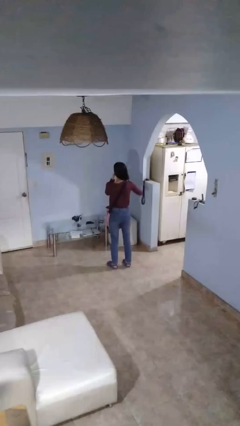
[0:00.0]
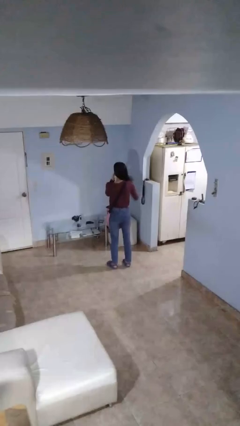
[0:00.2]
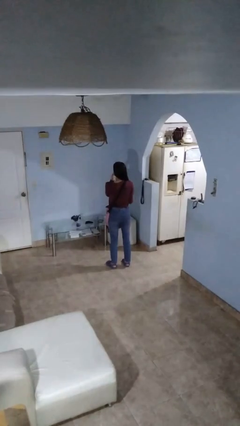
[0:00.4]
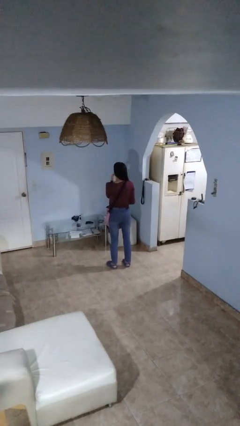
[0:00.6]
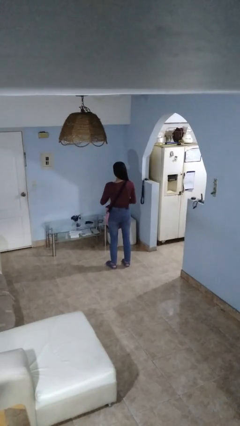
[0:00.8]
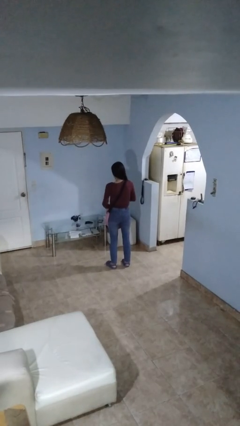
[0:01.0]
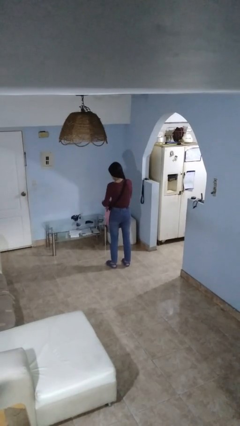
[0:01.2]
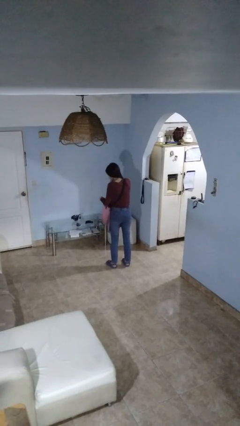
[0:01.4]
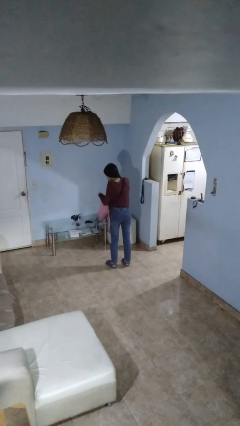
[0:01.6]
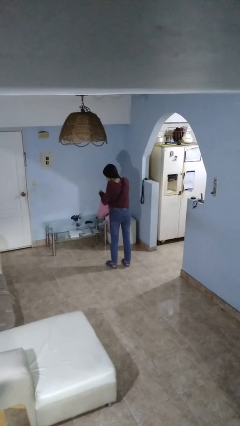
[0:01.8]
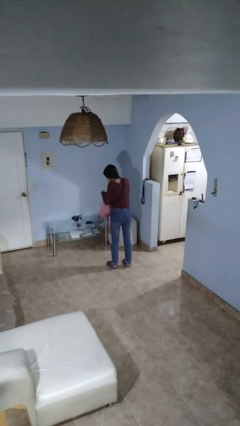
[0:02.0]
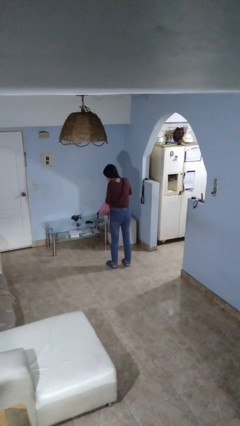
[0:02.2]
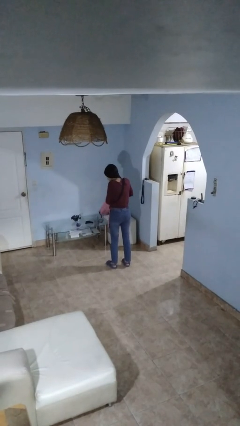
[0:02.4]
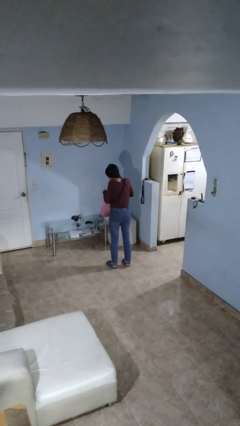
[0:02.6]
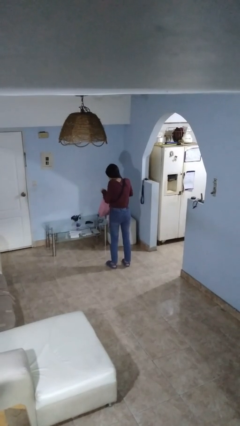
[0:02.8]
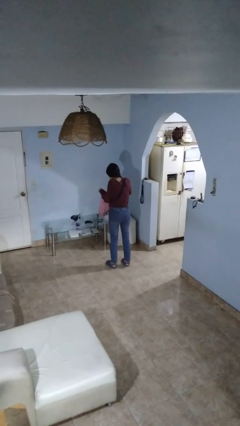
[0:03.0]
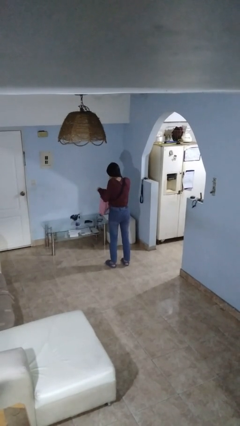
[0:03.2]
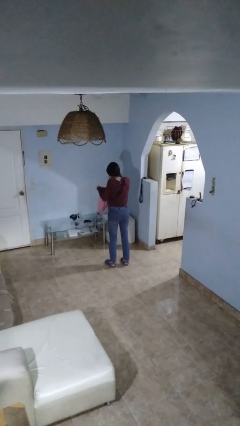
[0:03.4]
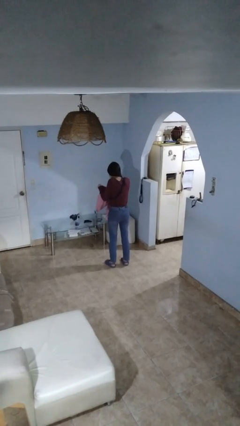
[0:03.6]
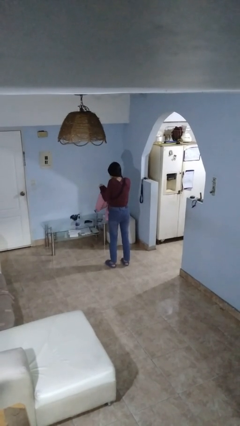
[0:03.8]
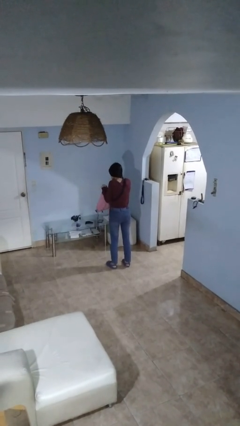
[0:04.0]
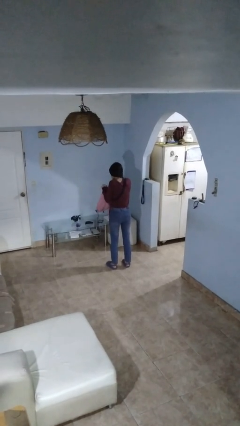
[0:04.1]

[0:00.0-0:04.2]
person searches in backpack

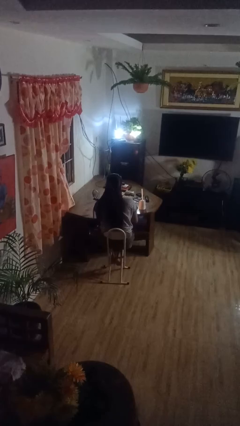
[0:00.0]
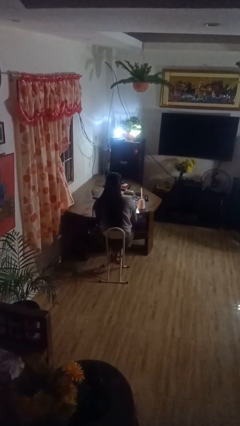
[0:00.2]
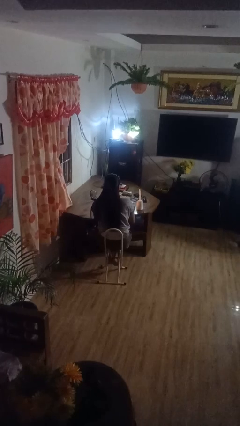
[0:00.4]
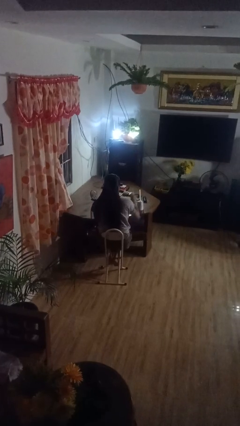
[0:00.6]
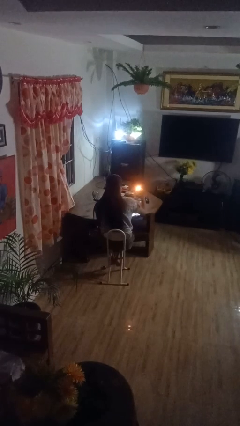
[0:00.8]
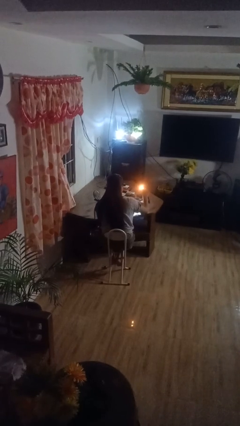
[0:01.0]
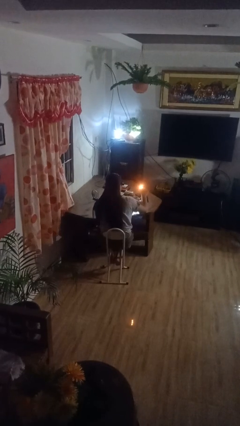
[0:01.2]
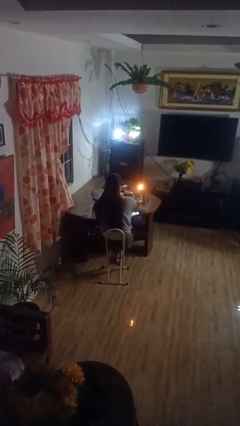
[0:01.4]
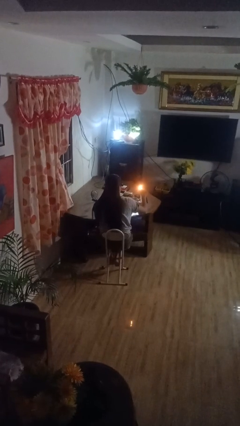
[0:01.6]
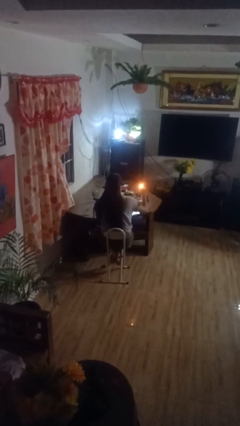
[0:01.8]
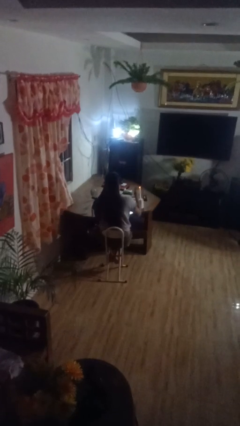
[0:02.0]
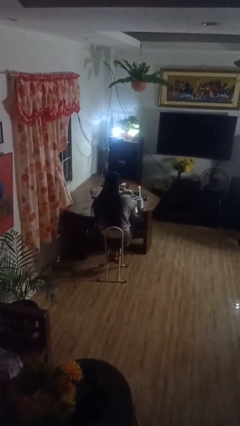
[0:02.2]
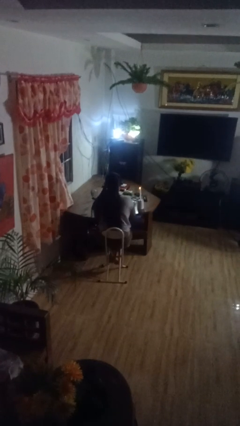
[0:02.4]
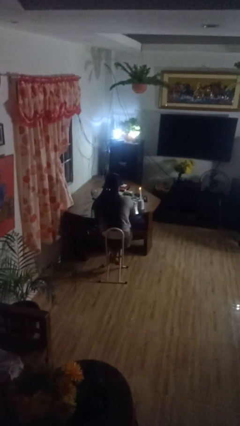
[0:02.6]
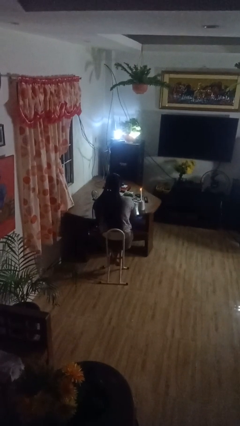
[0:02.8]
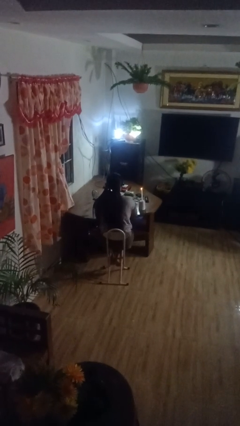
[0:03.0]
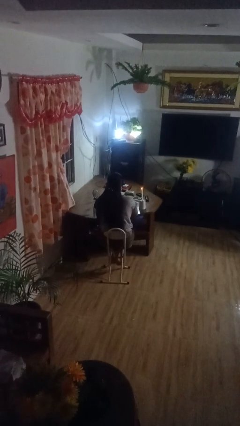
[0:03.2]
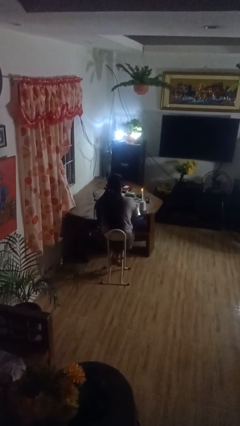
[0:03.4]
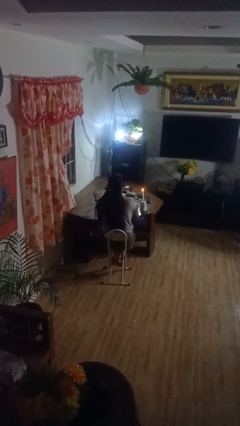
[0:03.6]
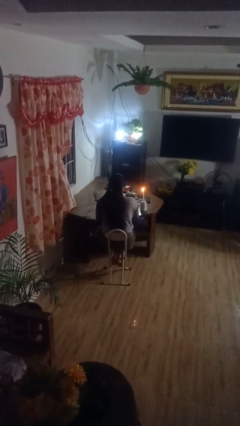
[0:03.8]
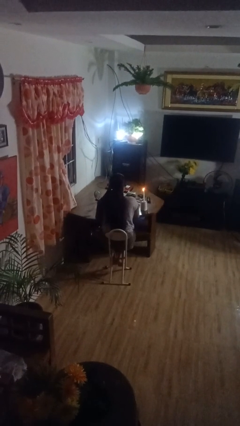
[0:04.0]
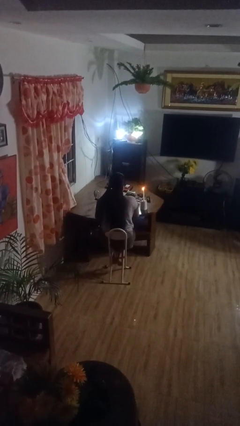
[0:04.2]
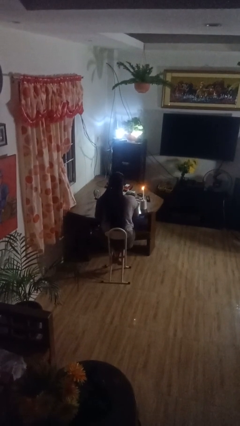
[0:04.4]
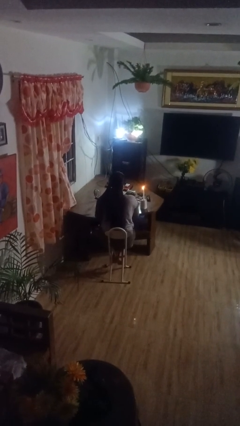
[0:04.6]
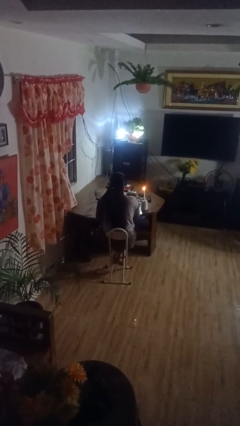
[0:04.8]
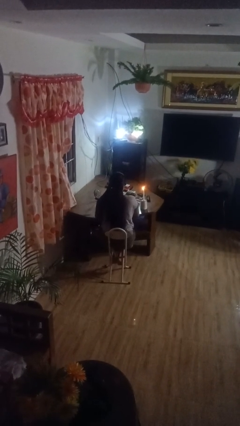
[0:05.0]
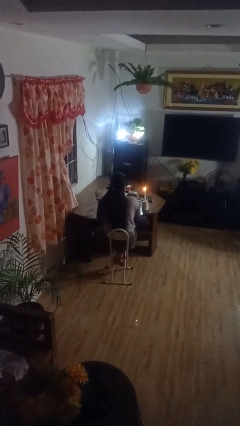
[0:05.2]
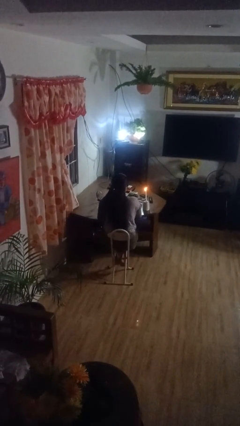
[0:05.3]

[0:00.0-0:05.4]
person lights candle

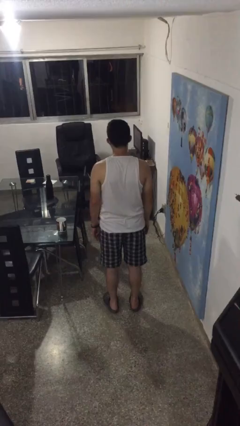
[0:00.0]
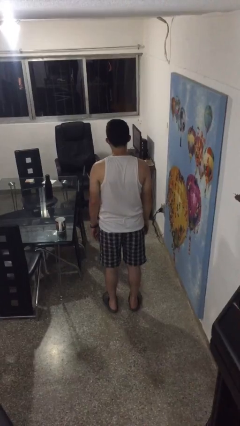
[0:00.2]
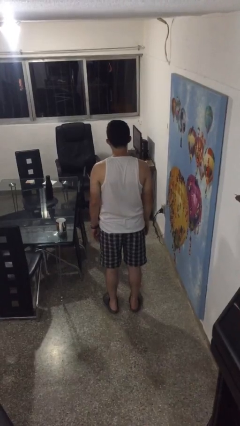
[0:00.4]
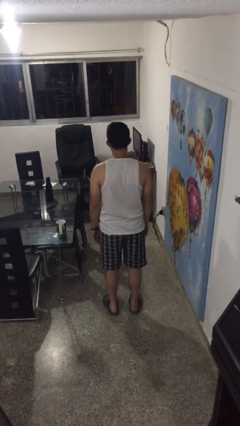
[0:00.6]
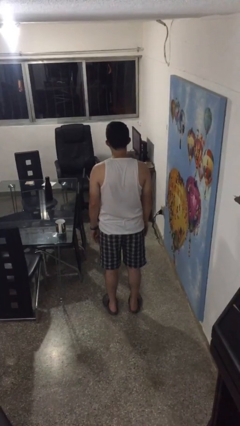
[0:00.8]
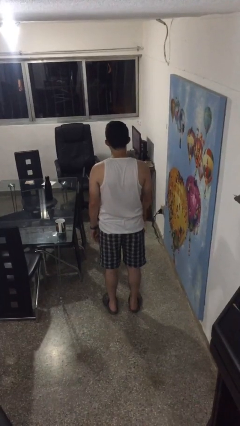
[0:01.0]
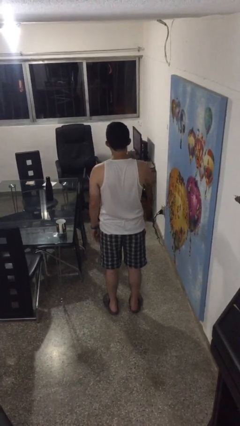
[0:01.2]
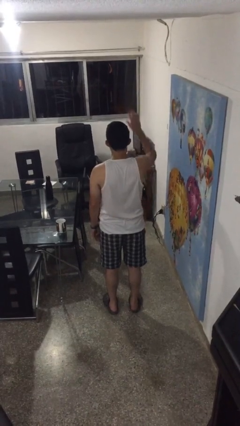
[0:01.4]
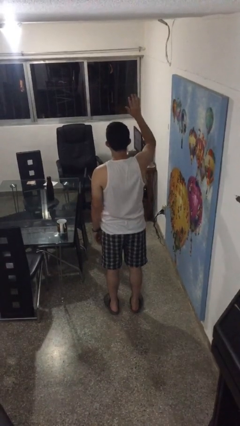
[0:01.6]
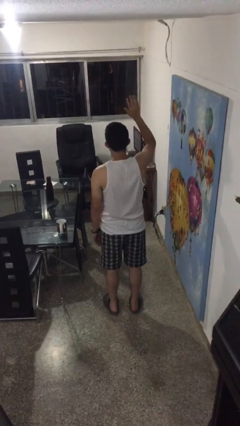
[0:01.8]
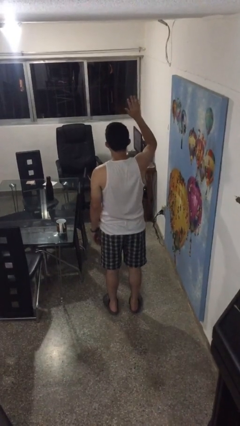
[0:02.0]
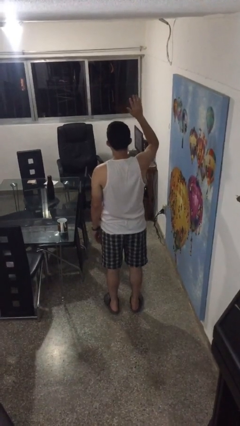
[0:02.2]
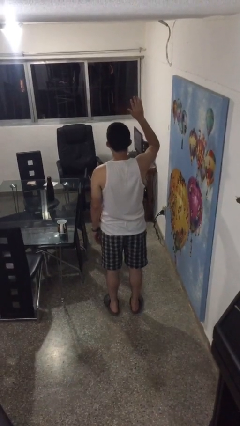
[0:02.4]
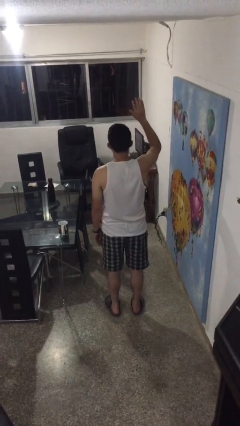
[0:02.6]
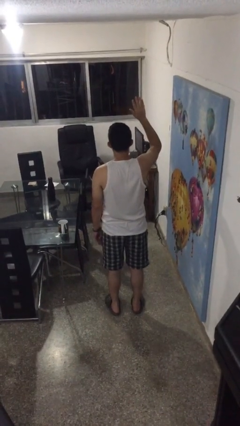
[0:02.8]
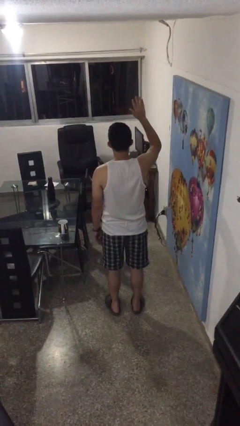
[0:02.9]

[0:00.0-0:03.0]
person gestures raise hand

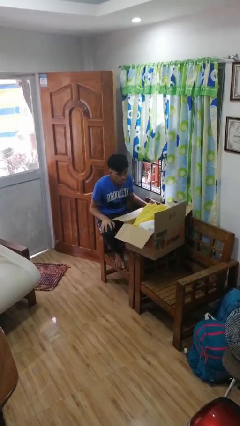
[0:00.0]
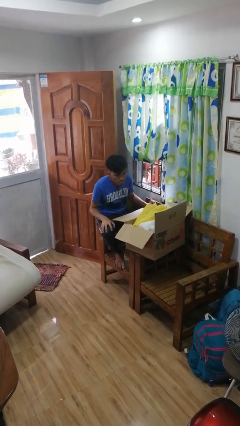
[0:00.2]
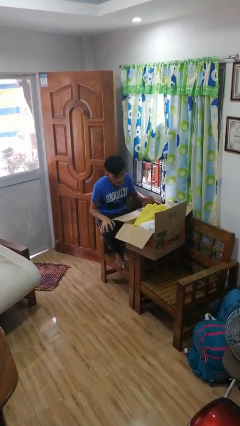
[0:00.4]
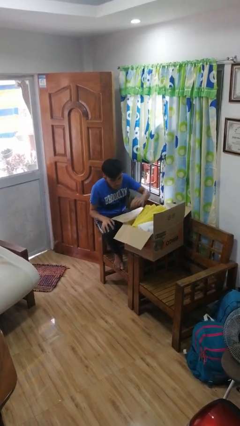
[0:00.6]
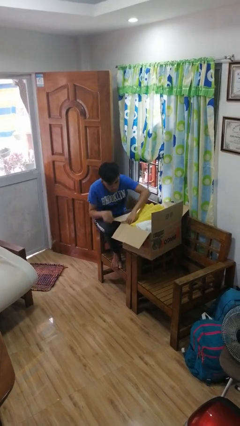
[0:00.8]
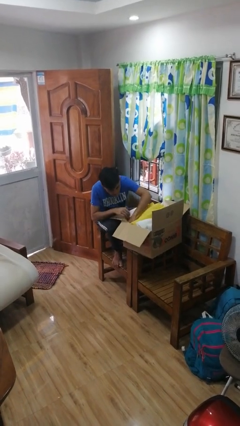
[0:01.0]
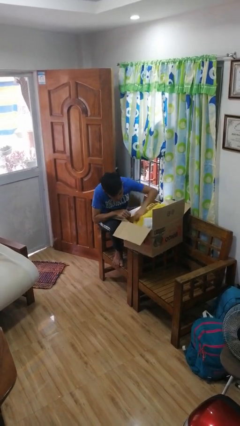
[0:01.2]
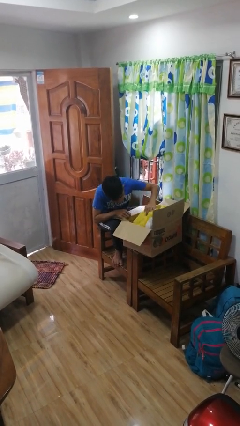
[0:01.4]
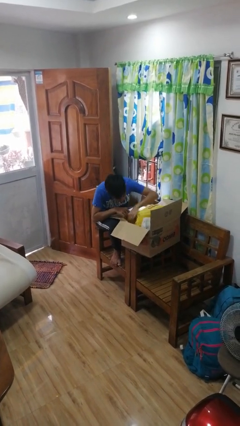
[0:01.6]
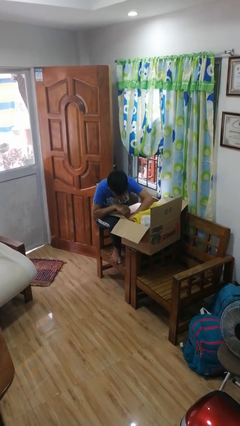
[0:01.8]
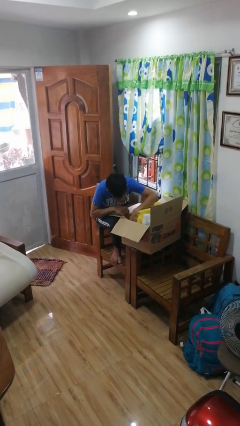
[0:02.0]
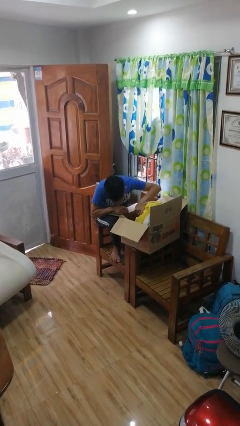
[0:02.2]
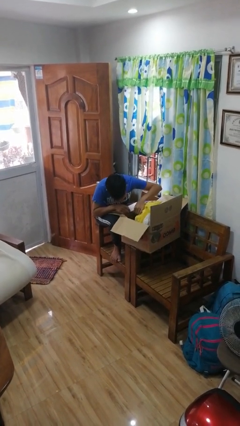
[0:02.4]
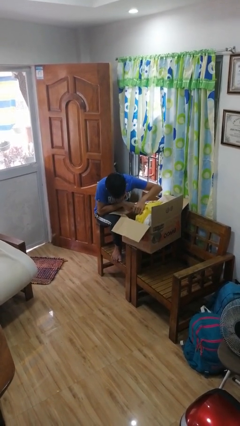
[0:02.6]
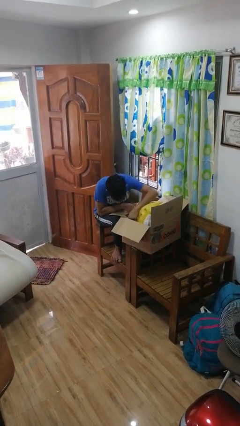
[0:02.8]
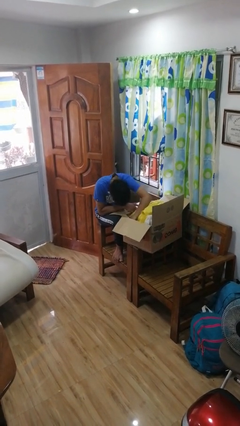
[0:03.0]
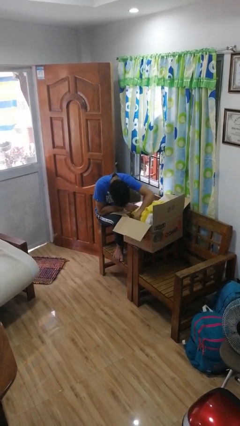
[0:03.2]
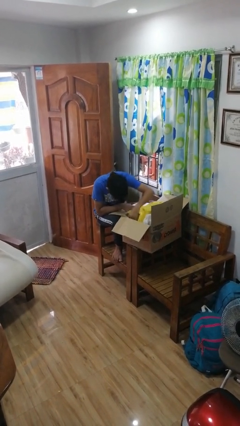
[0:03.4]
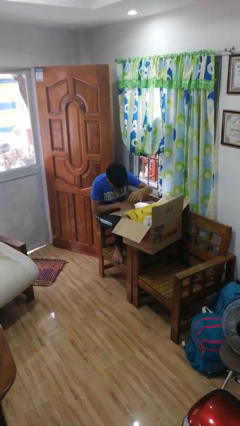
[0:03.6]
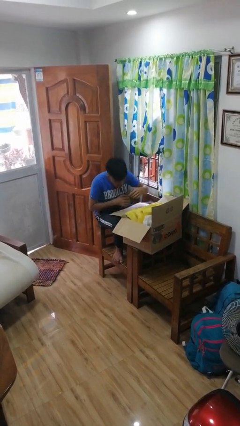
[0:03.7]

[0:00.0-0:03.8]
person searches in box

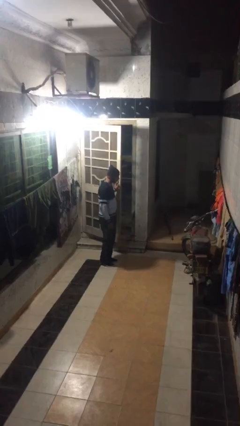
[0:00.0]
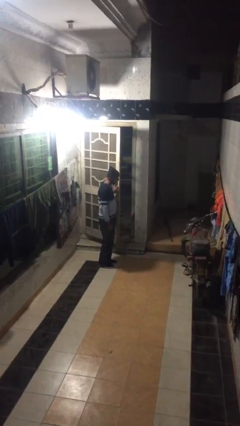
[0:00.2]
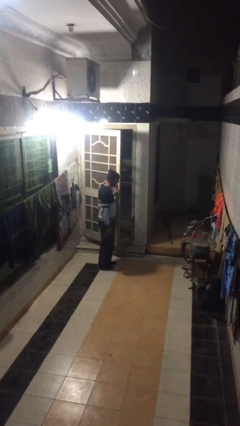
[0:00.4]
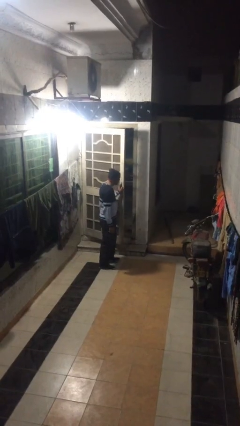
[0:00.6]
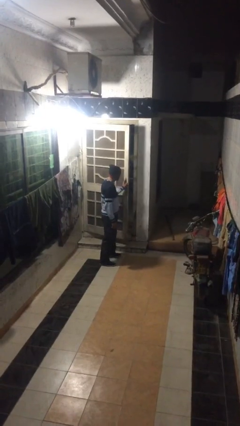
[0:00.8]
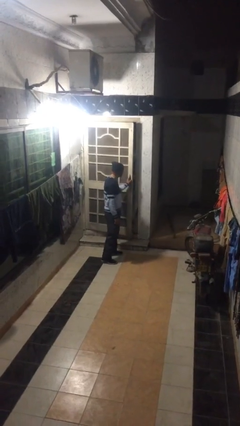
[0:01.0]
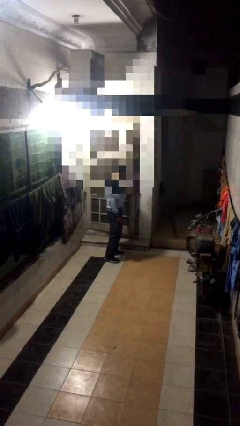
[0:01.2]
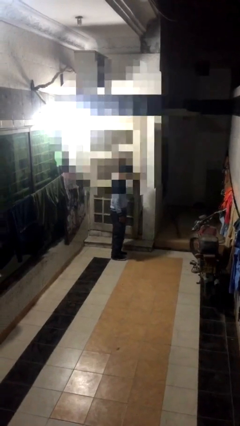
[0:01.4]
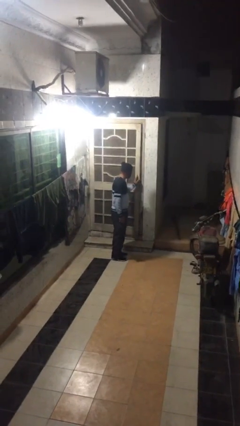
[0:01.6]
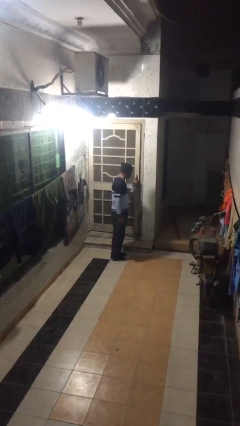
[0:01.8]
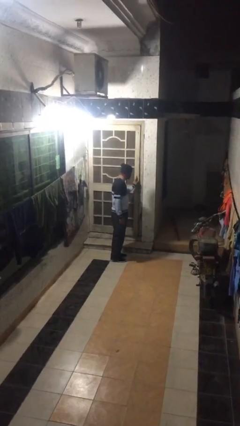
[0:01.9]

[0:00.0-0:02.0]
person closes facility door
